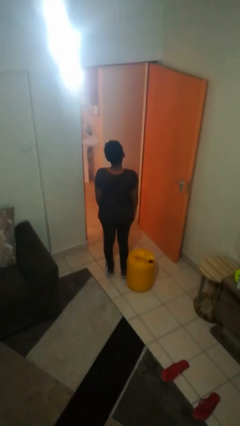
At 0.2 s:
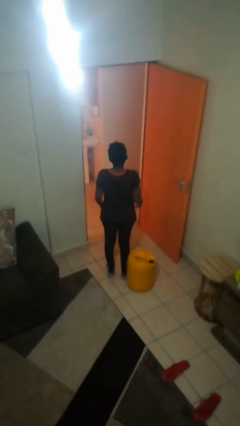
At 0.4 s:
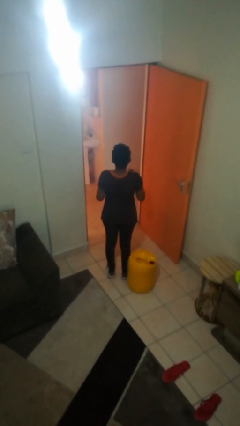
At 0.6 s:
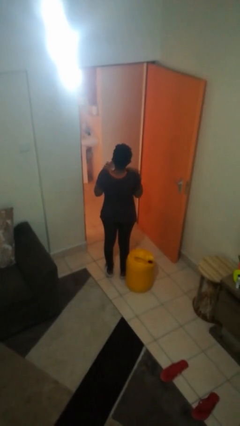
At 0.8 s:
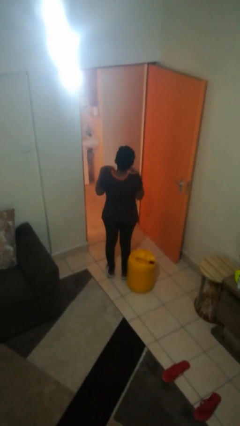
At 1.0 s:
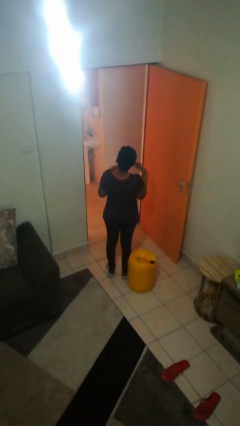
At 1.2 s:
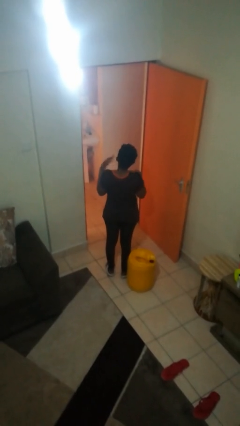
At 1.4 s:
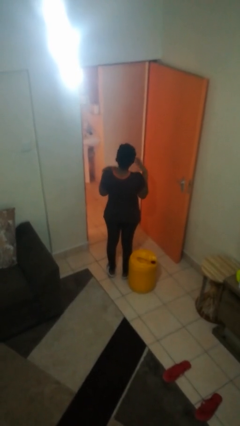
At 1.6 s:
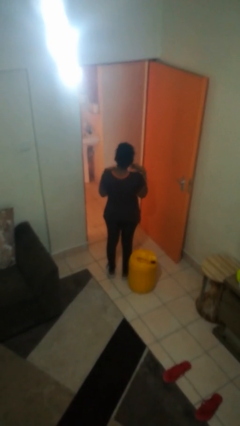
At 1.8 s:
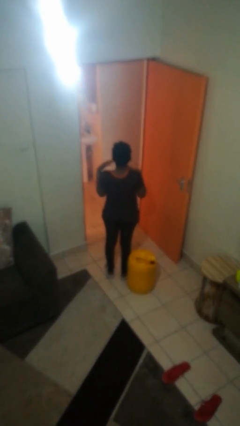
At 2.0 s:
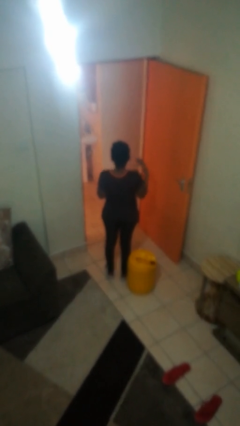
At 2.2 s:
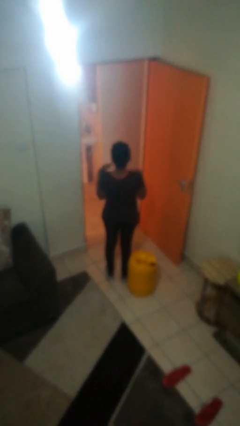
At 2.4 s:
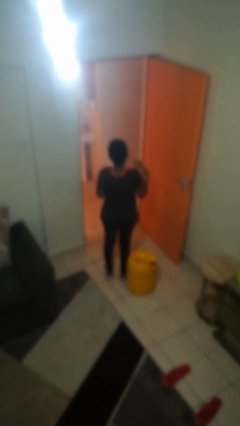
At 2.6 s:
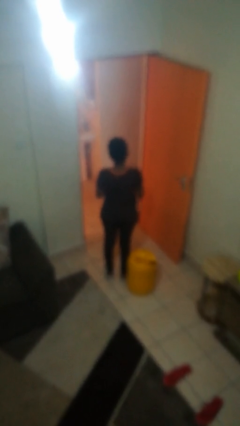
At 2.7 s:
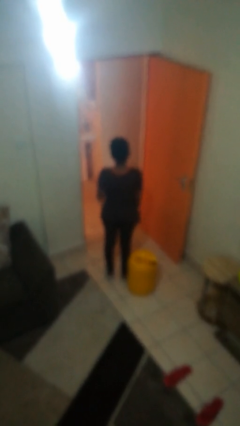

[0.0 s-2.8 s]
person drums on chest

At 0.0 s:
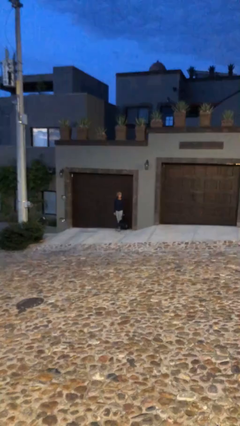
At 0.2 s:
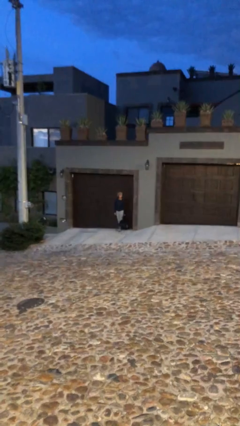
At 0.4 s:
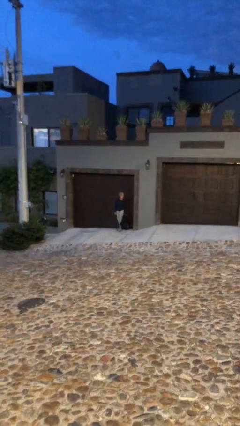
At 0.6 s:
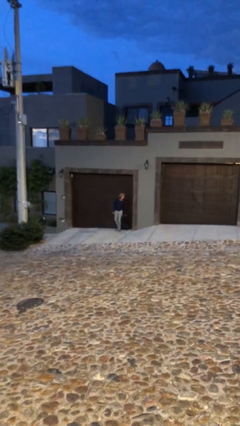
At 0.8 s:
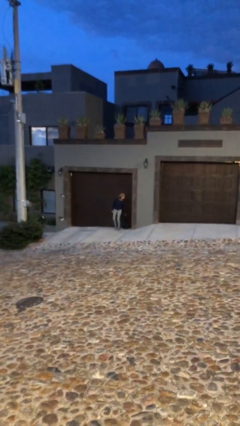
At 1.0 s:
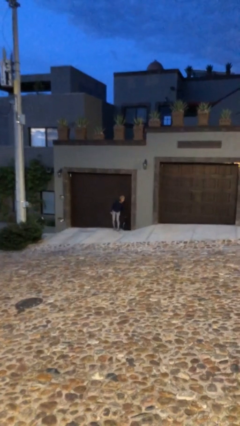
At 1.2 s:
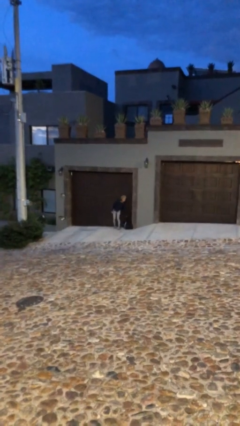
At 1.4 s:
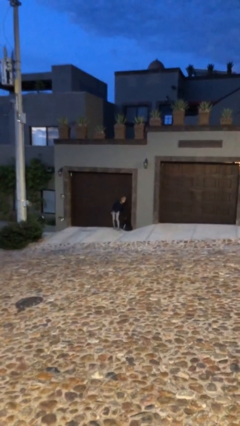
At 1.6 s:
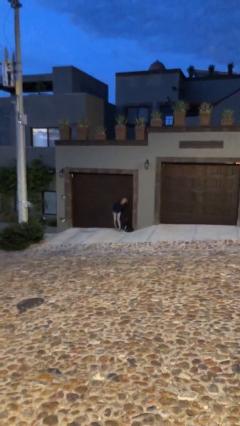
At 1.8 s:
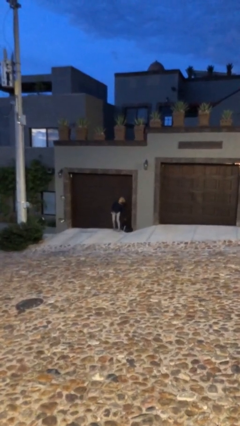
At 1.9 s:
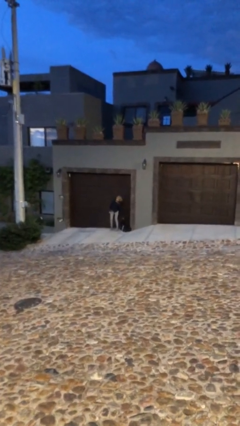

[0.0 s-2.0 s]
person puts down object on floor

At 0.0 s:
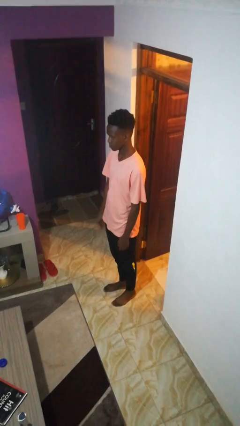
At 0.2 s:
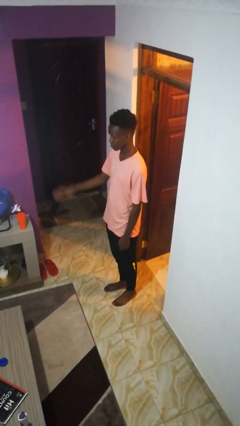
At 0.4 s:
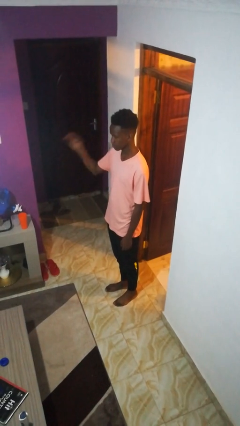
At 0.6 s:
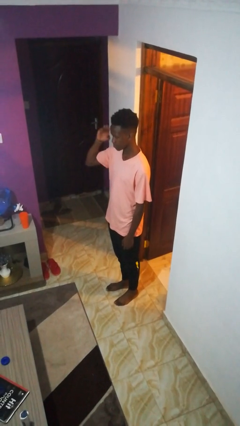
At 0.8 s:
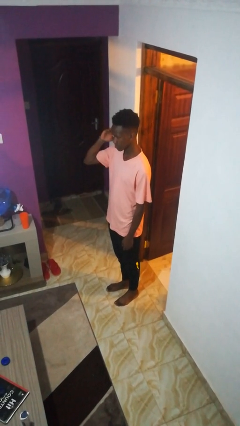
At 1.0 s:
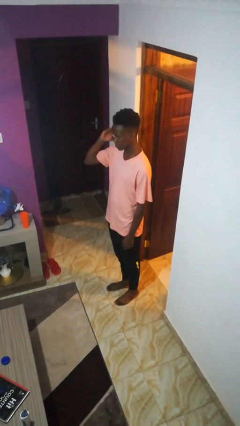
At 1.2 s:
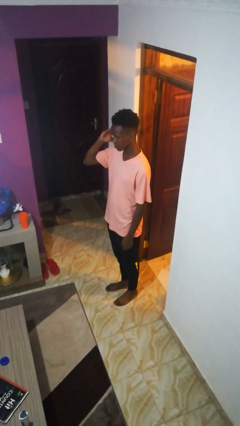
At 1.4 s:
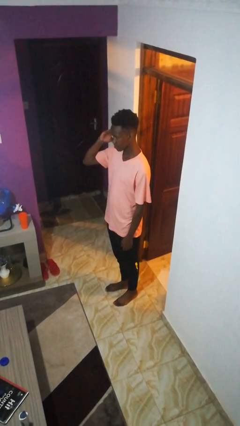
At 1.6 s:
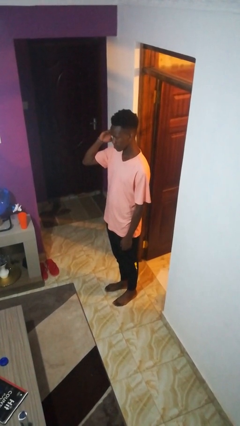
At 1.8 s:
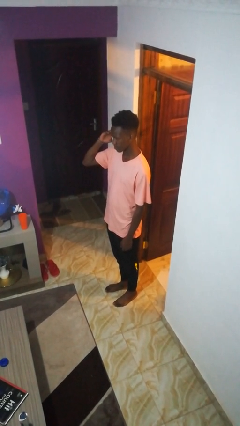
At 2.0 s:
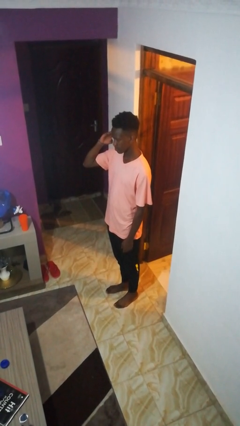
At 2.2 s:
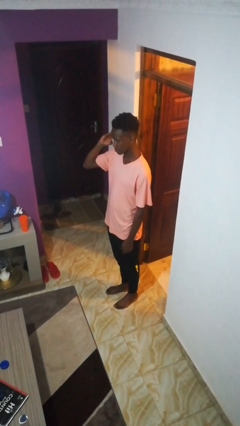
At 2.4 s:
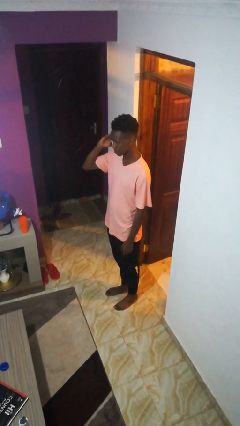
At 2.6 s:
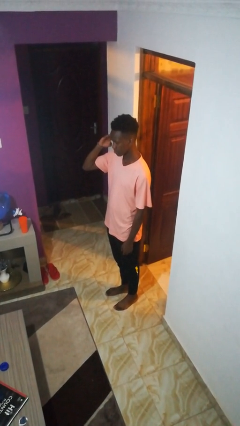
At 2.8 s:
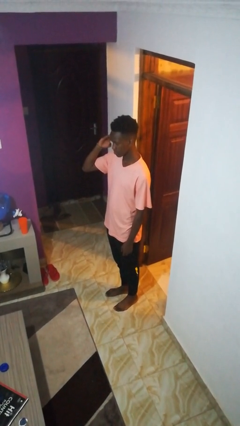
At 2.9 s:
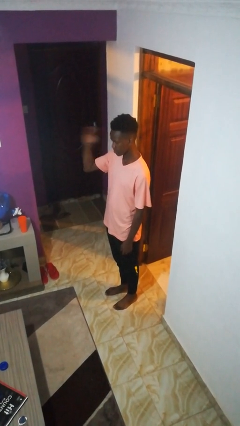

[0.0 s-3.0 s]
person salutes

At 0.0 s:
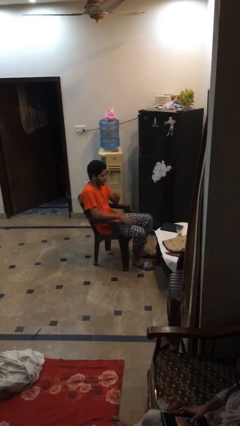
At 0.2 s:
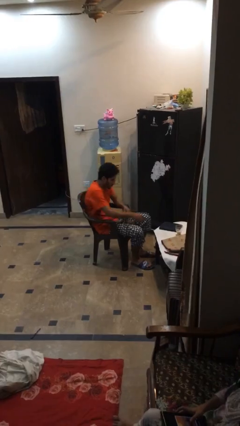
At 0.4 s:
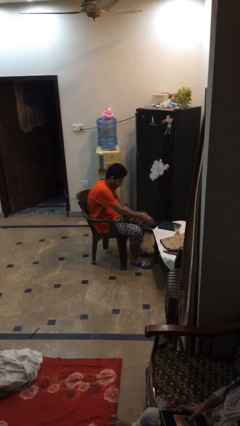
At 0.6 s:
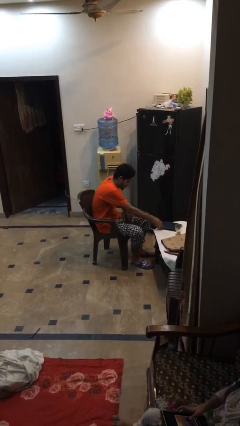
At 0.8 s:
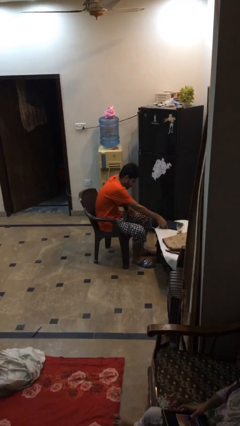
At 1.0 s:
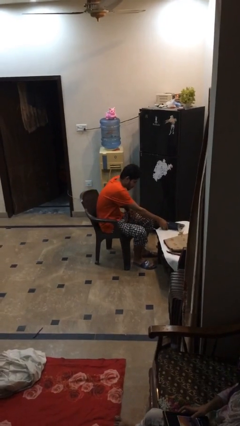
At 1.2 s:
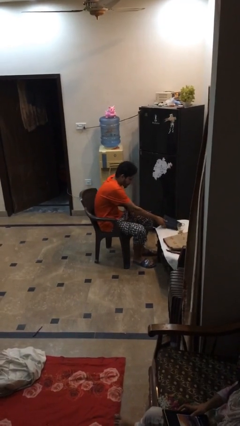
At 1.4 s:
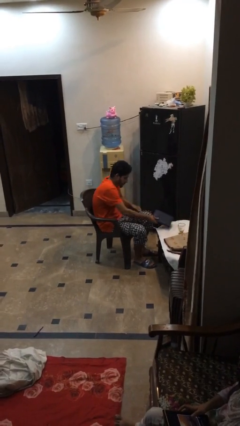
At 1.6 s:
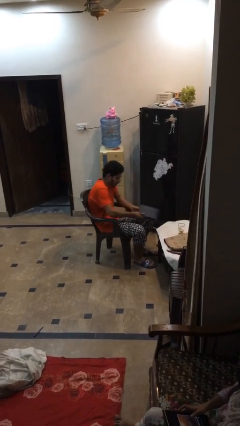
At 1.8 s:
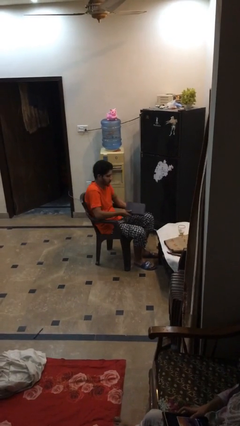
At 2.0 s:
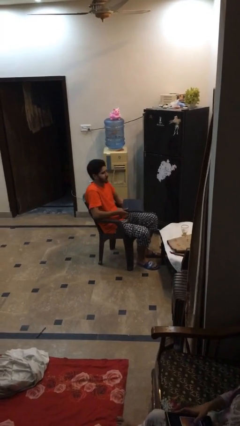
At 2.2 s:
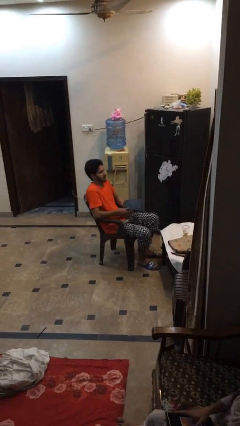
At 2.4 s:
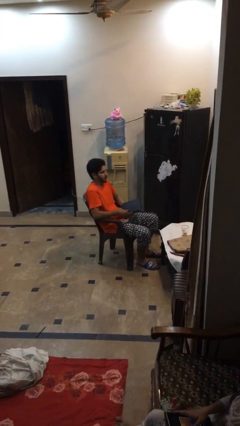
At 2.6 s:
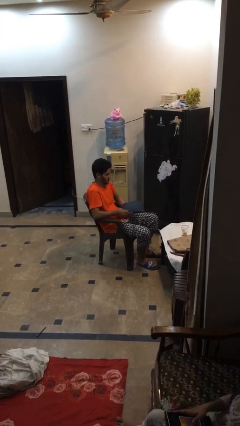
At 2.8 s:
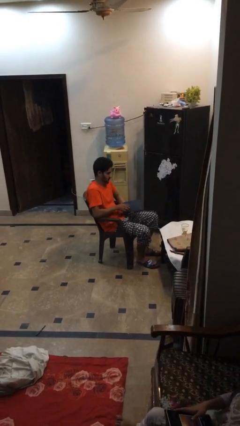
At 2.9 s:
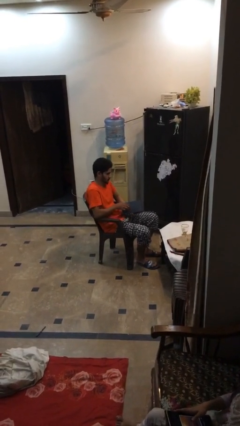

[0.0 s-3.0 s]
person picks up object from table

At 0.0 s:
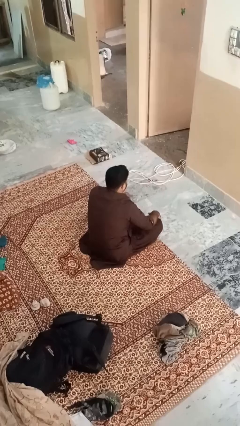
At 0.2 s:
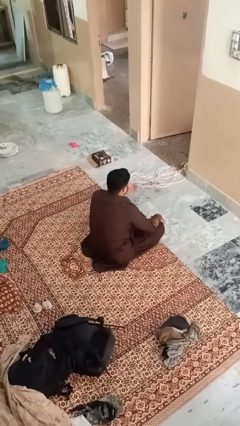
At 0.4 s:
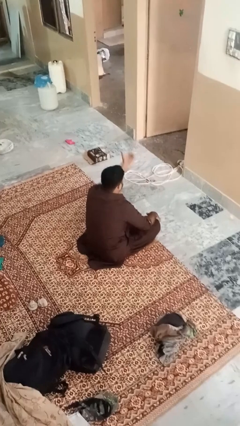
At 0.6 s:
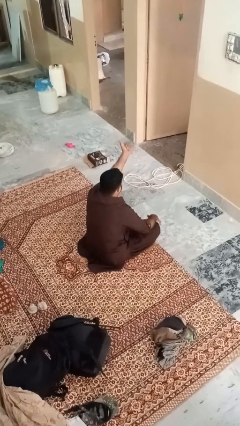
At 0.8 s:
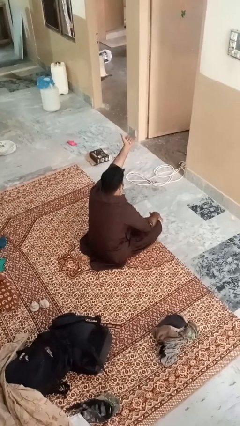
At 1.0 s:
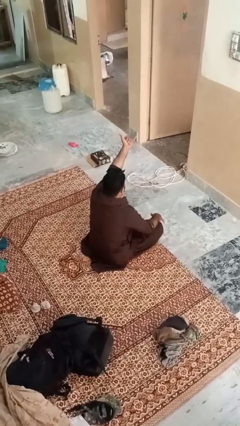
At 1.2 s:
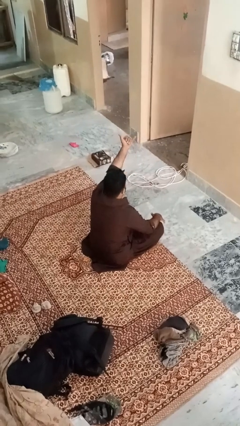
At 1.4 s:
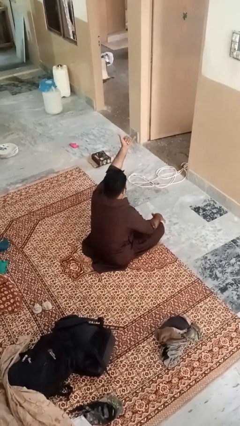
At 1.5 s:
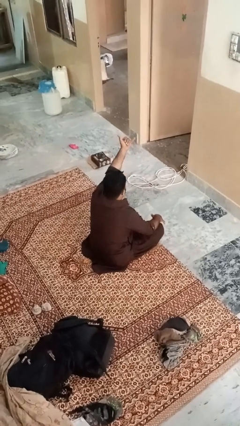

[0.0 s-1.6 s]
person gestures hang loose

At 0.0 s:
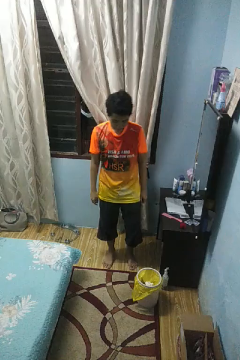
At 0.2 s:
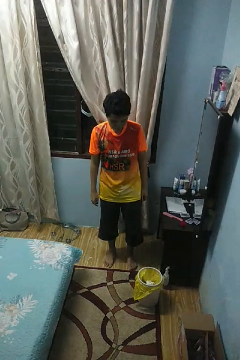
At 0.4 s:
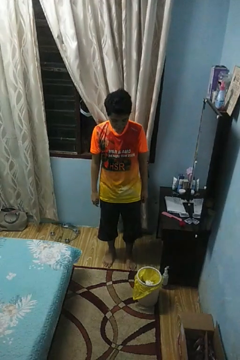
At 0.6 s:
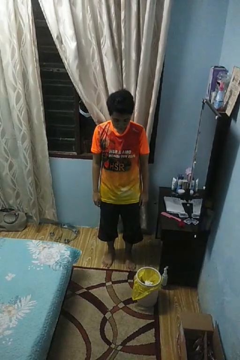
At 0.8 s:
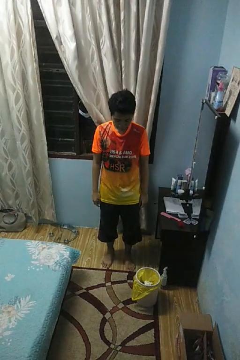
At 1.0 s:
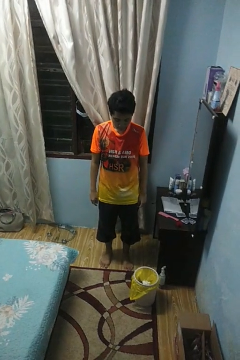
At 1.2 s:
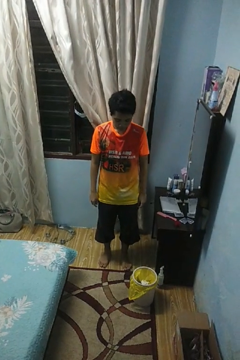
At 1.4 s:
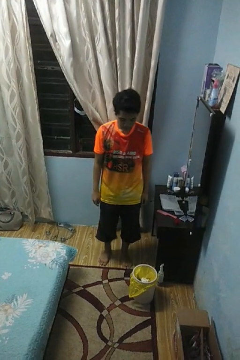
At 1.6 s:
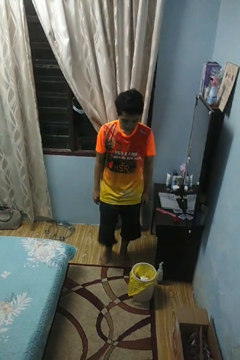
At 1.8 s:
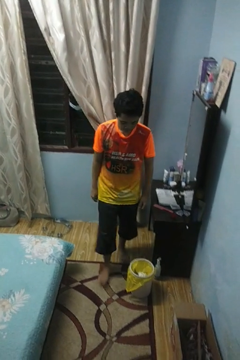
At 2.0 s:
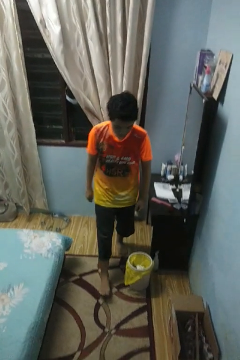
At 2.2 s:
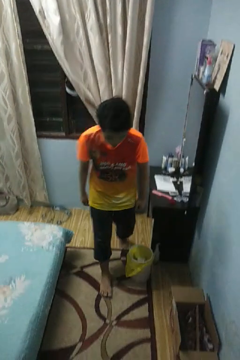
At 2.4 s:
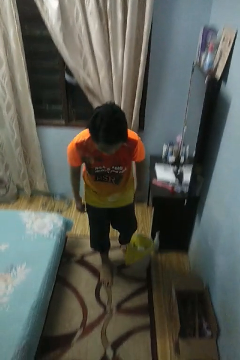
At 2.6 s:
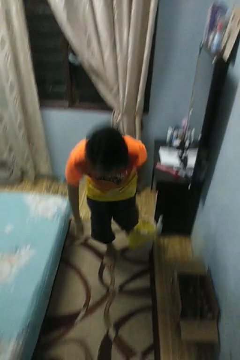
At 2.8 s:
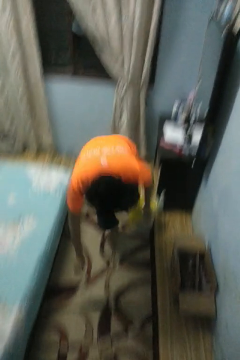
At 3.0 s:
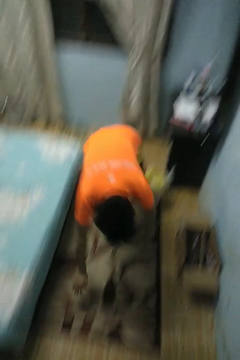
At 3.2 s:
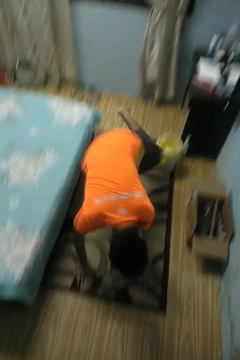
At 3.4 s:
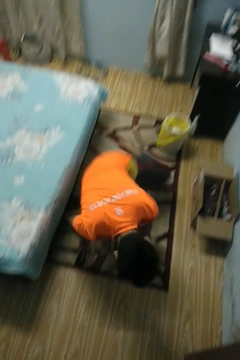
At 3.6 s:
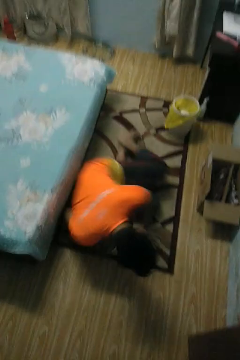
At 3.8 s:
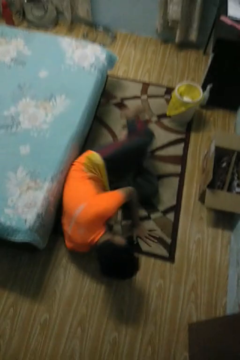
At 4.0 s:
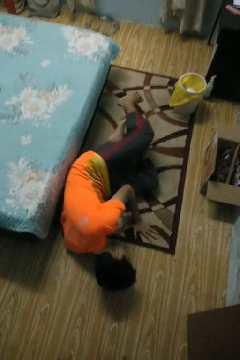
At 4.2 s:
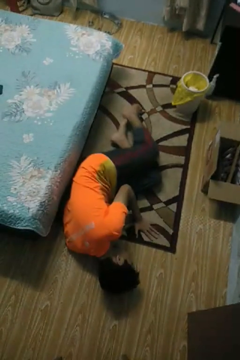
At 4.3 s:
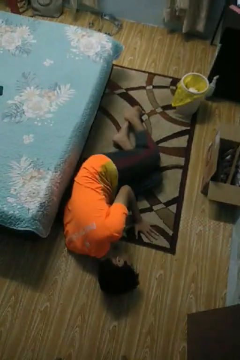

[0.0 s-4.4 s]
person trips on object on floor

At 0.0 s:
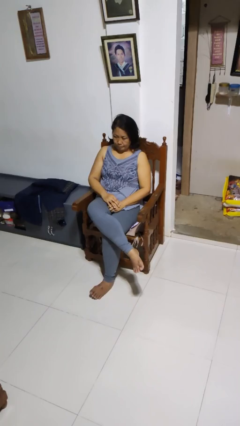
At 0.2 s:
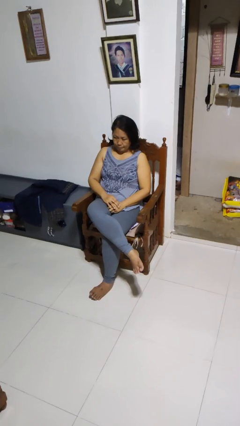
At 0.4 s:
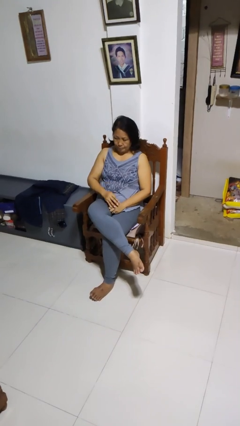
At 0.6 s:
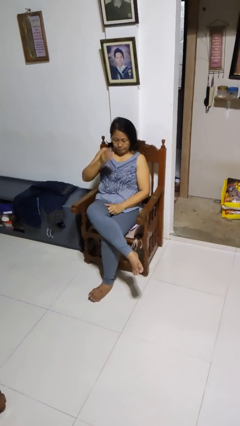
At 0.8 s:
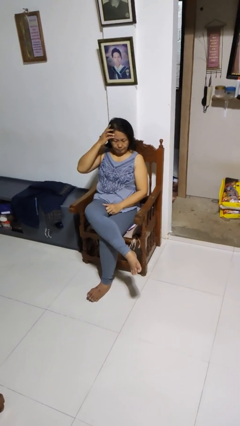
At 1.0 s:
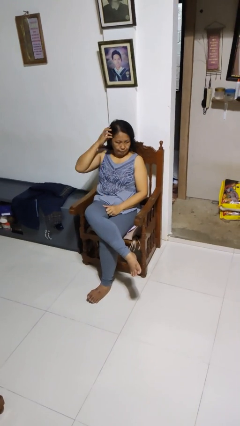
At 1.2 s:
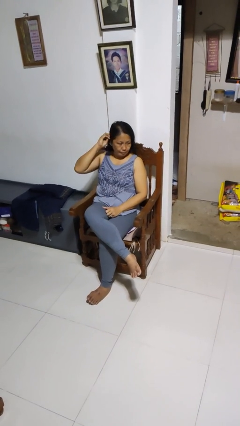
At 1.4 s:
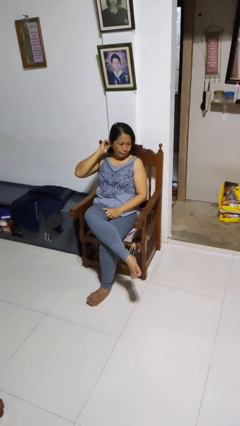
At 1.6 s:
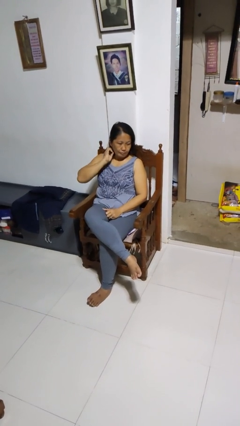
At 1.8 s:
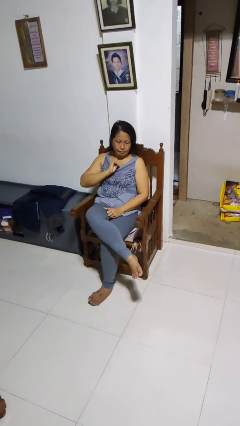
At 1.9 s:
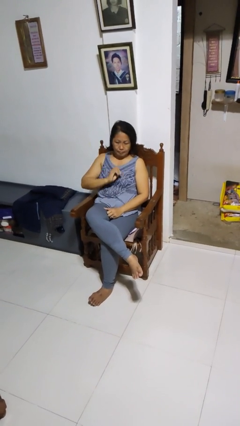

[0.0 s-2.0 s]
person strokes hair
